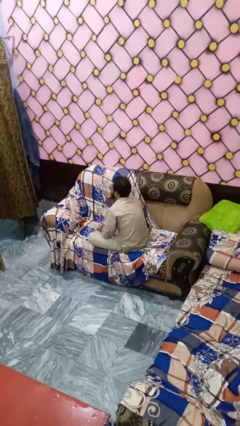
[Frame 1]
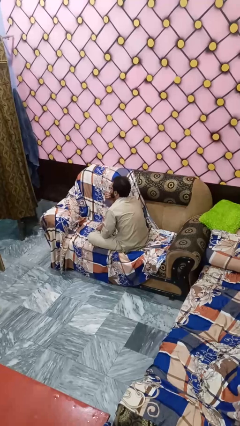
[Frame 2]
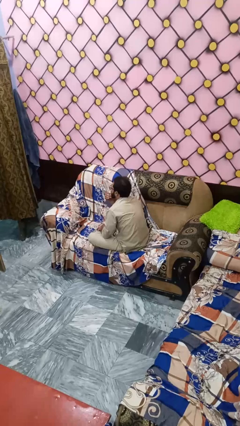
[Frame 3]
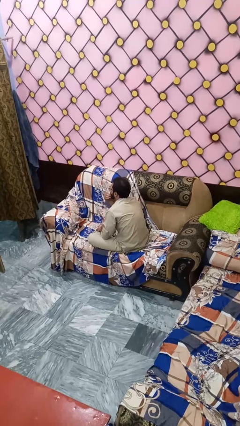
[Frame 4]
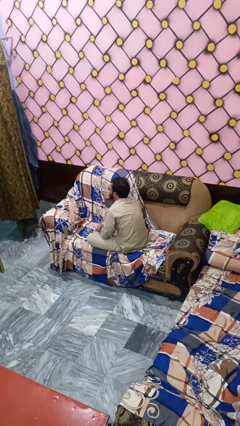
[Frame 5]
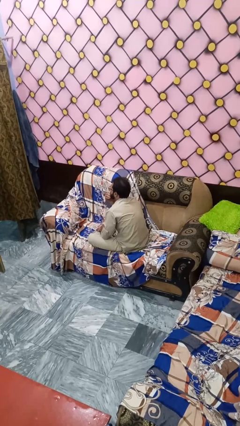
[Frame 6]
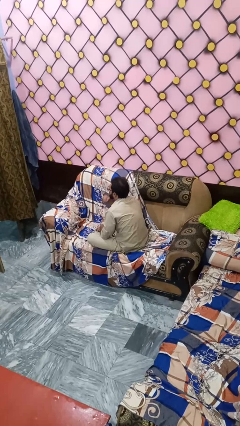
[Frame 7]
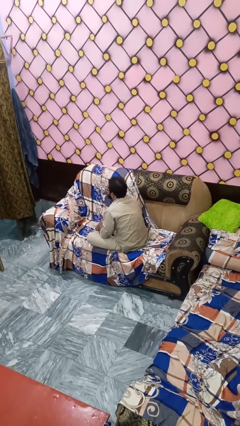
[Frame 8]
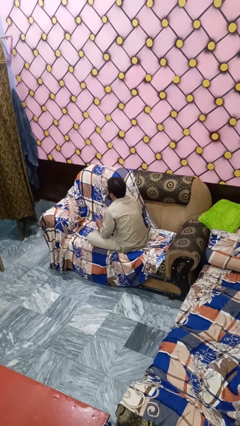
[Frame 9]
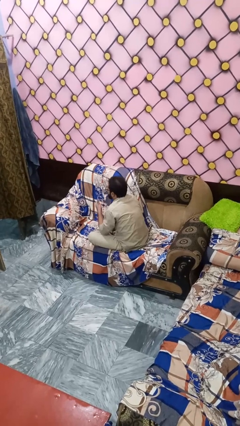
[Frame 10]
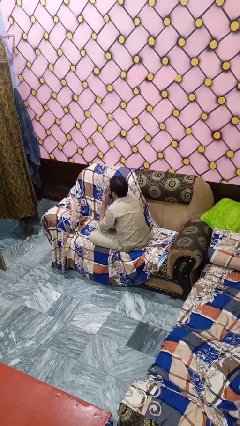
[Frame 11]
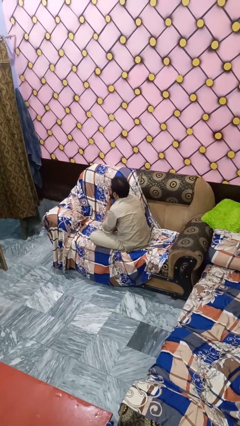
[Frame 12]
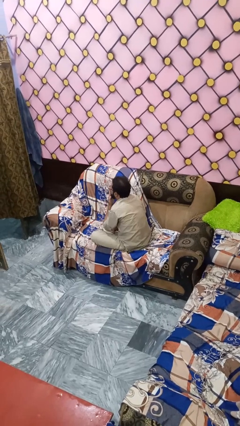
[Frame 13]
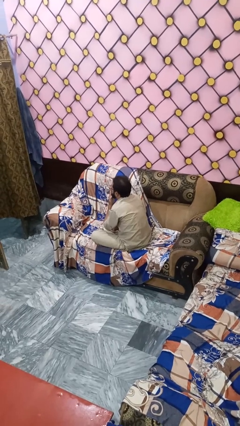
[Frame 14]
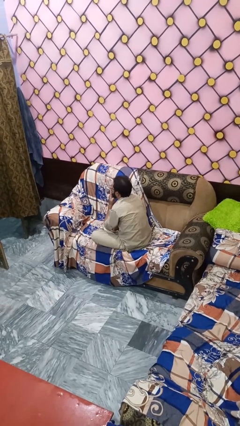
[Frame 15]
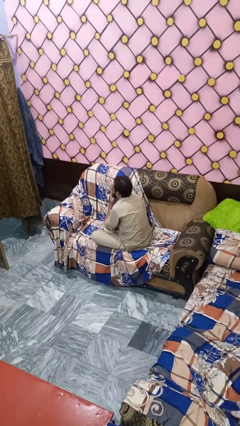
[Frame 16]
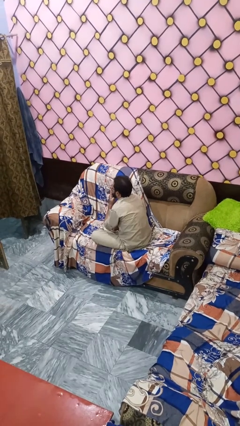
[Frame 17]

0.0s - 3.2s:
person gestures blow kiss

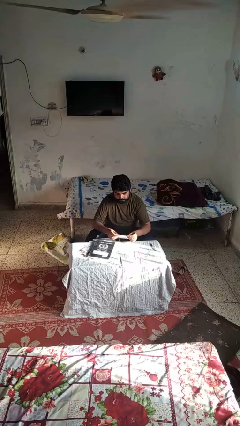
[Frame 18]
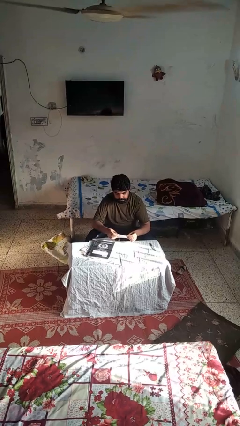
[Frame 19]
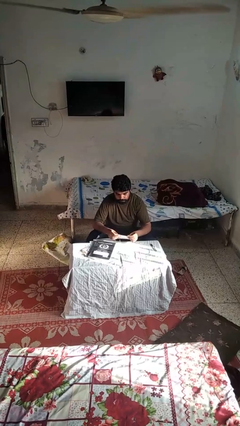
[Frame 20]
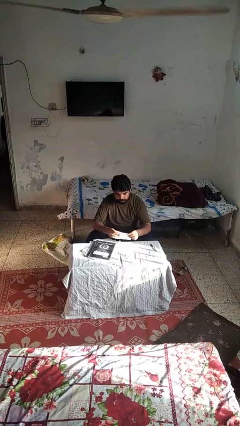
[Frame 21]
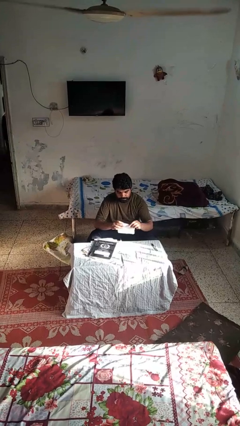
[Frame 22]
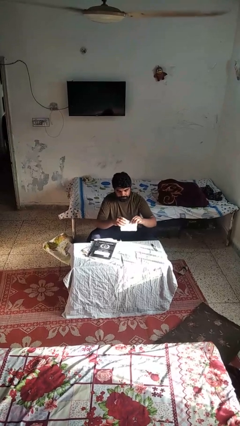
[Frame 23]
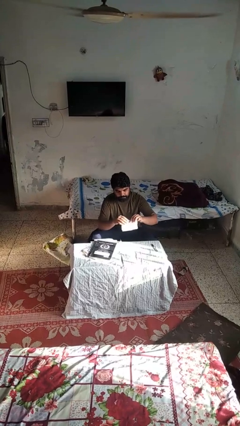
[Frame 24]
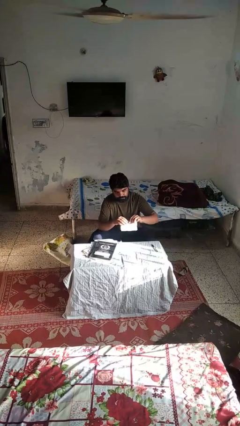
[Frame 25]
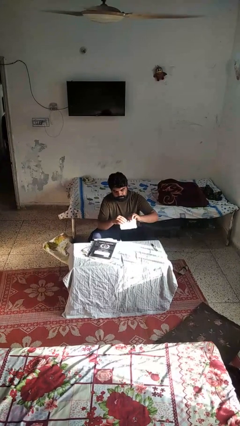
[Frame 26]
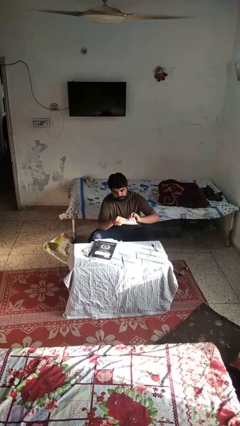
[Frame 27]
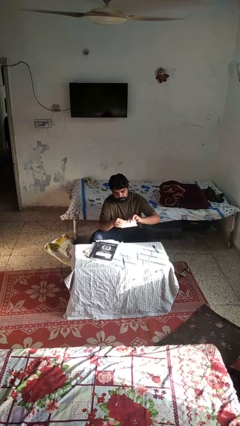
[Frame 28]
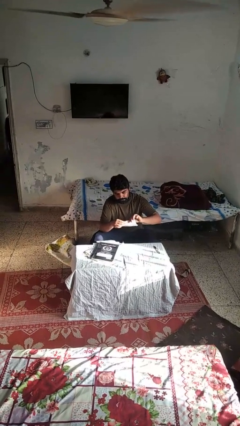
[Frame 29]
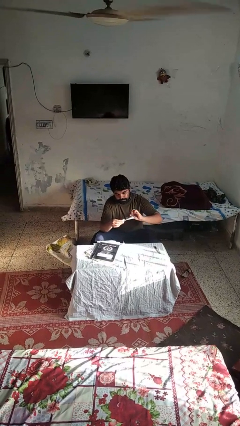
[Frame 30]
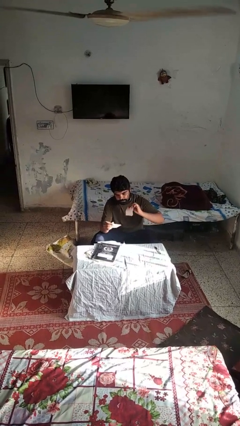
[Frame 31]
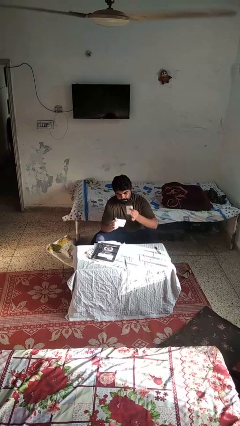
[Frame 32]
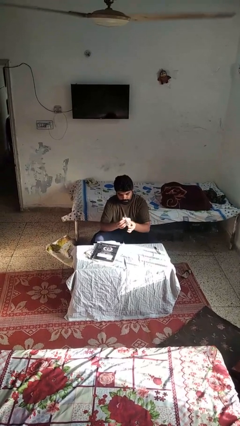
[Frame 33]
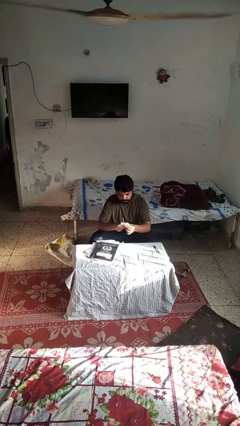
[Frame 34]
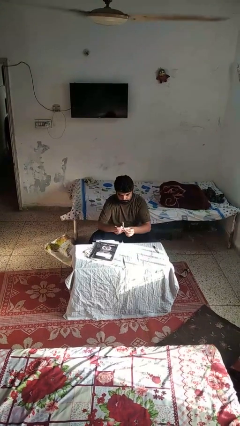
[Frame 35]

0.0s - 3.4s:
person tears paper

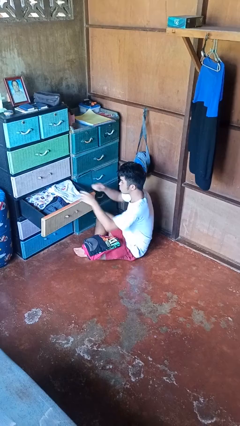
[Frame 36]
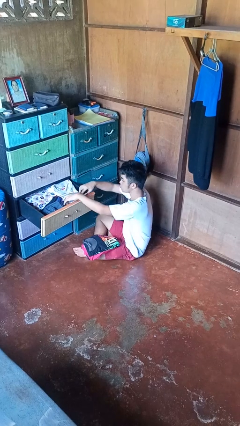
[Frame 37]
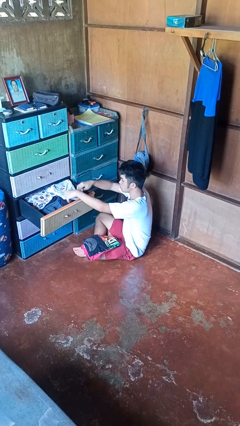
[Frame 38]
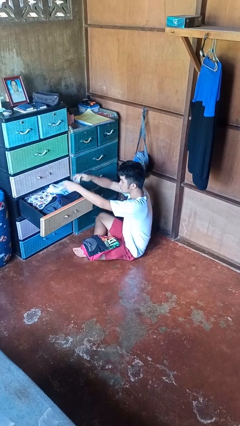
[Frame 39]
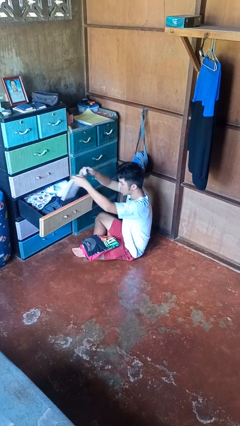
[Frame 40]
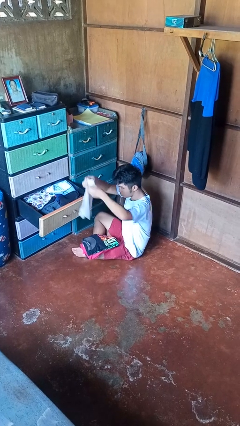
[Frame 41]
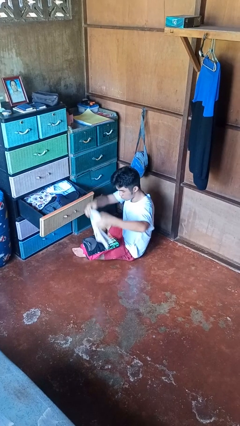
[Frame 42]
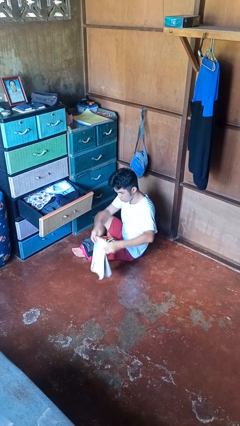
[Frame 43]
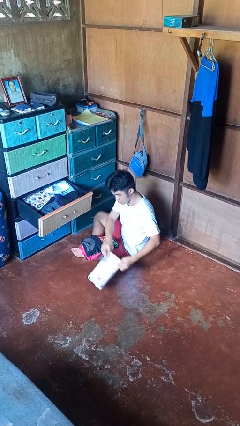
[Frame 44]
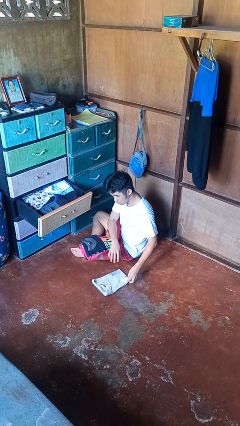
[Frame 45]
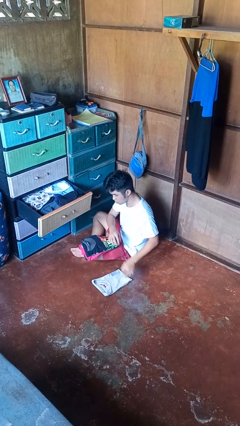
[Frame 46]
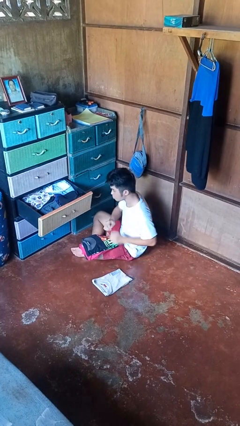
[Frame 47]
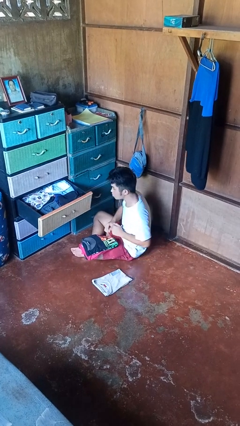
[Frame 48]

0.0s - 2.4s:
person takes clothes from dresser

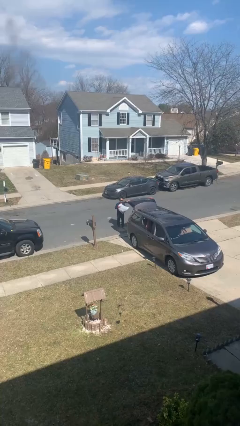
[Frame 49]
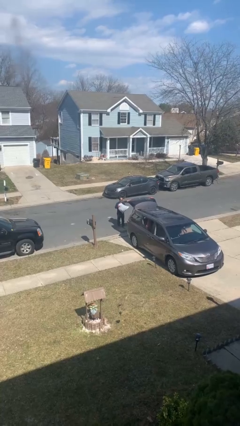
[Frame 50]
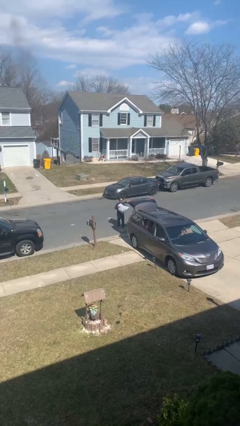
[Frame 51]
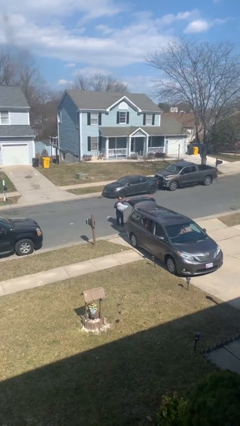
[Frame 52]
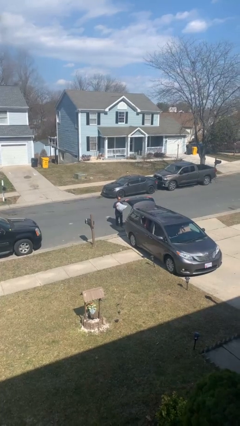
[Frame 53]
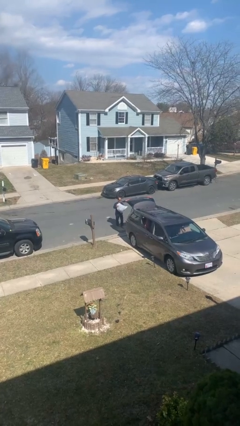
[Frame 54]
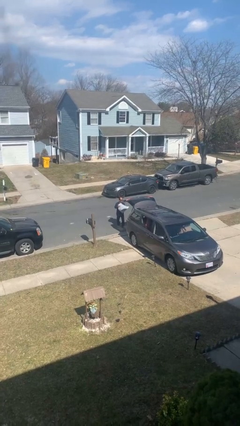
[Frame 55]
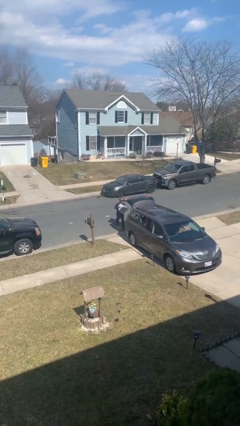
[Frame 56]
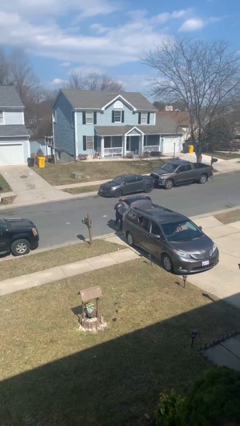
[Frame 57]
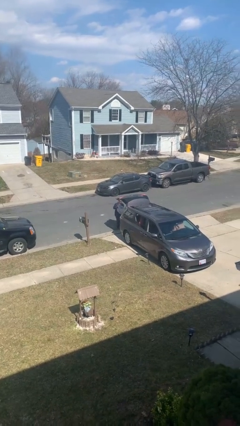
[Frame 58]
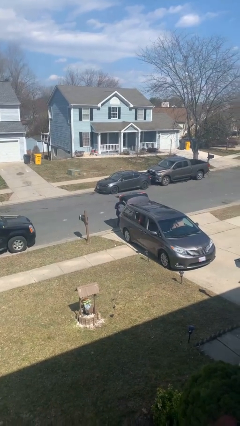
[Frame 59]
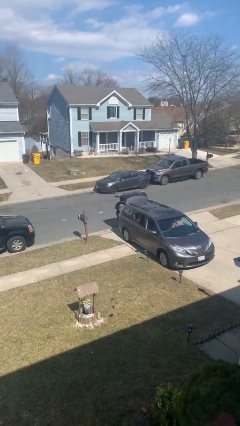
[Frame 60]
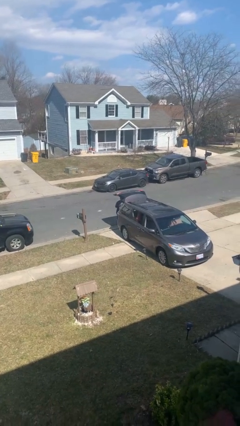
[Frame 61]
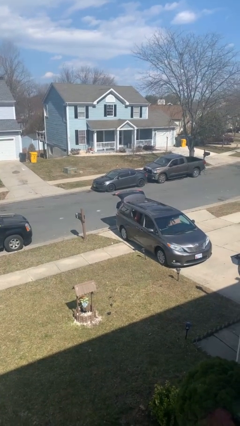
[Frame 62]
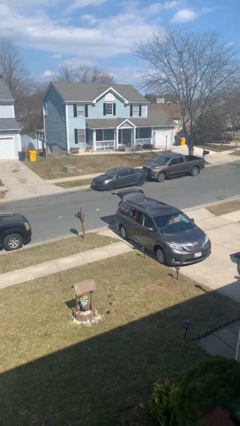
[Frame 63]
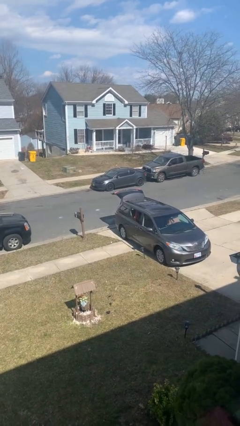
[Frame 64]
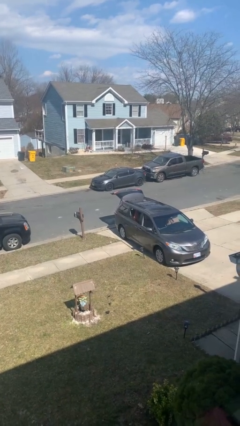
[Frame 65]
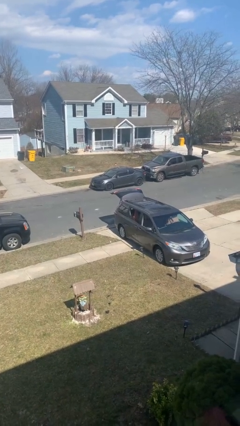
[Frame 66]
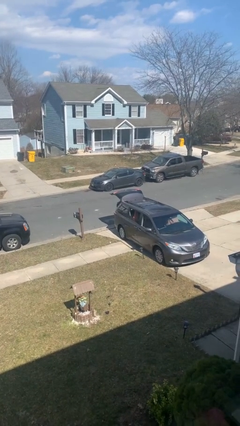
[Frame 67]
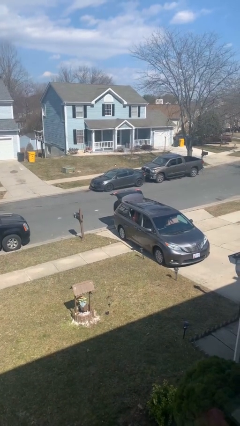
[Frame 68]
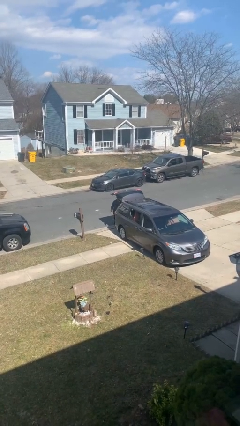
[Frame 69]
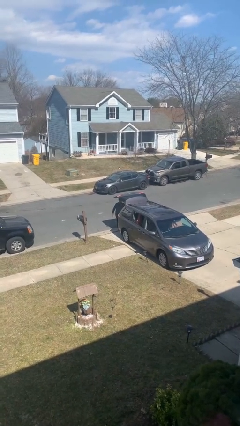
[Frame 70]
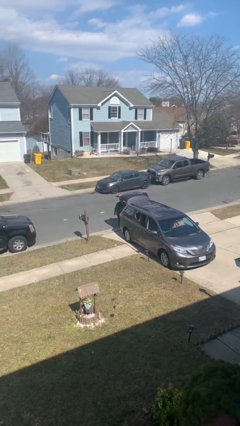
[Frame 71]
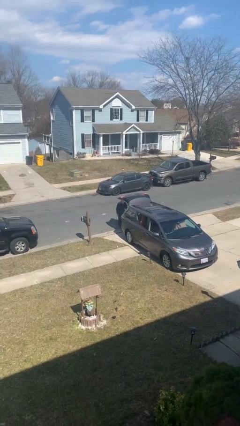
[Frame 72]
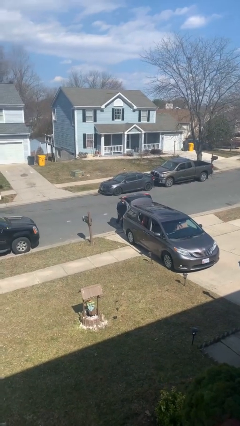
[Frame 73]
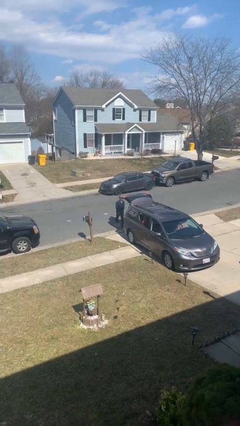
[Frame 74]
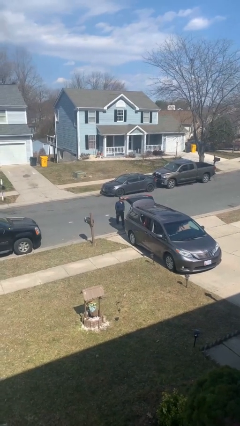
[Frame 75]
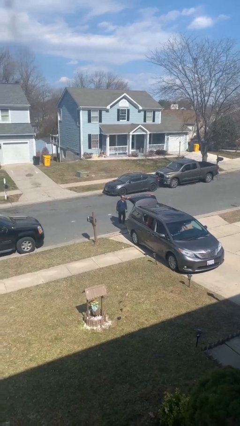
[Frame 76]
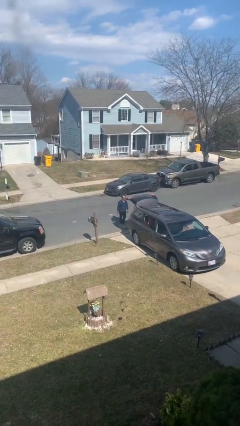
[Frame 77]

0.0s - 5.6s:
person loads car

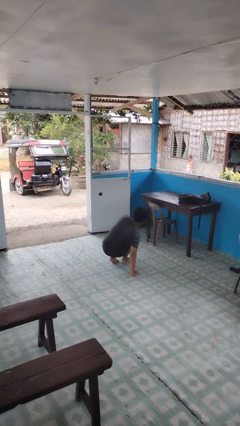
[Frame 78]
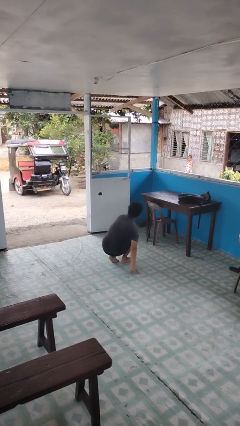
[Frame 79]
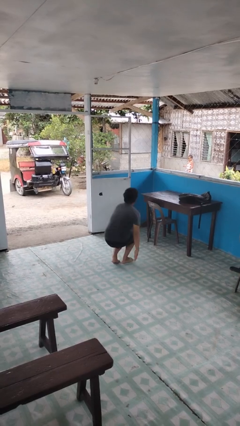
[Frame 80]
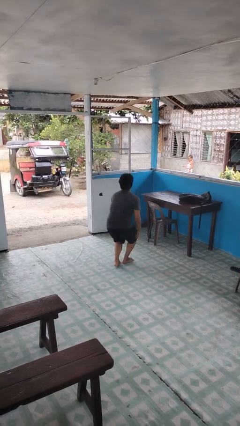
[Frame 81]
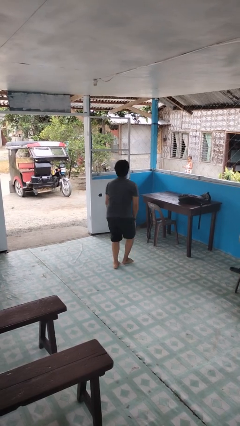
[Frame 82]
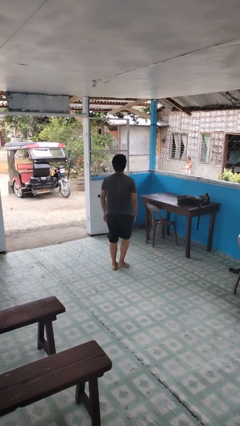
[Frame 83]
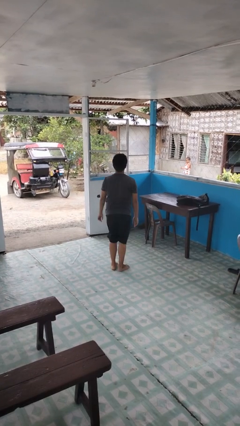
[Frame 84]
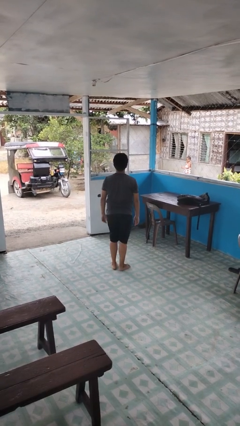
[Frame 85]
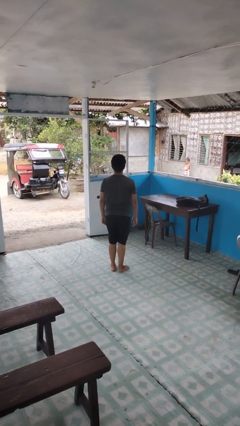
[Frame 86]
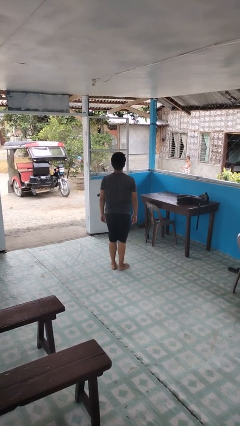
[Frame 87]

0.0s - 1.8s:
person stands up from floor

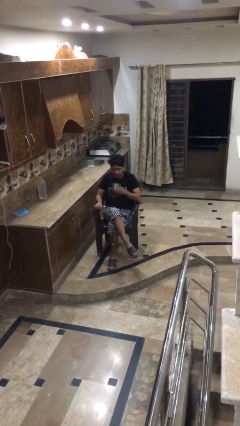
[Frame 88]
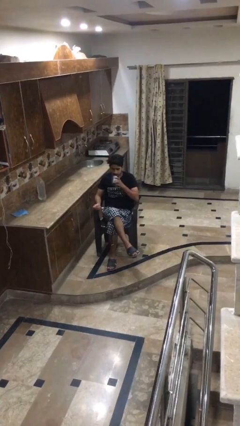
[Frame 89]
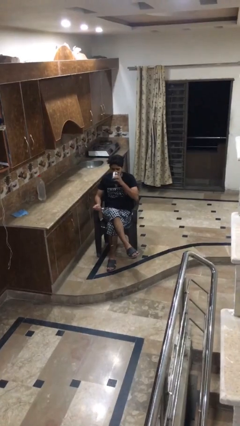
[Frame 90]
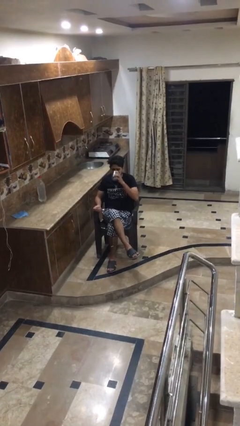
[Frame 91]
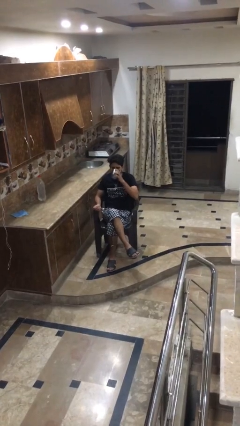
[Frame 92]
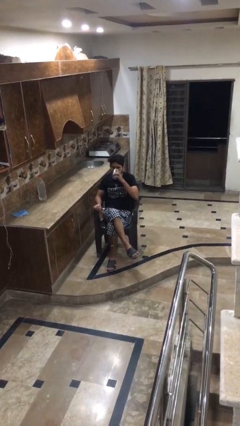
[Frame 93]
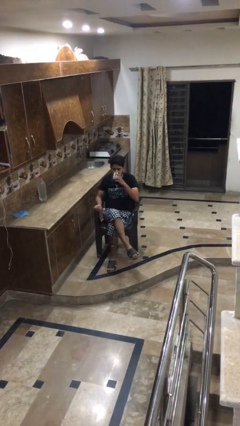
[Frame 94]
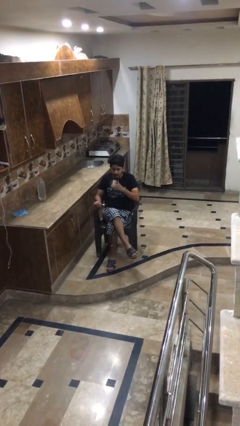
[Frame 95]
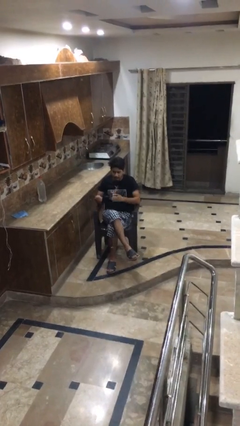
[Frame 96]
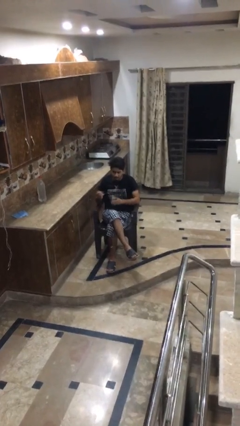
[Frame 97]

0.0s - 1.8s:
person drinks from mug
